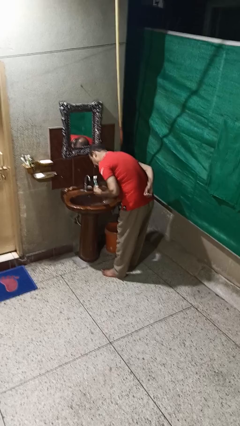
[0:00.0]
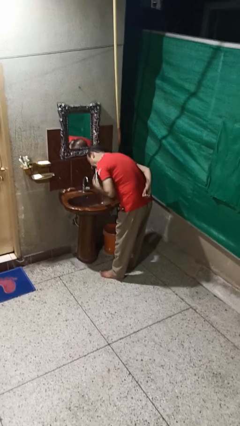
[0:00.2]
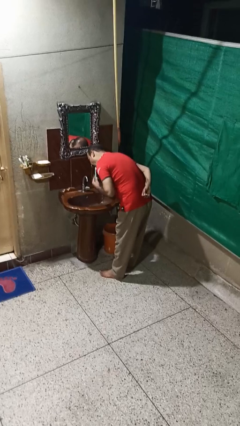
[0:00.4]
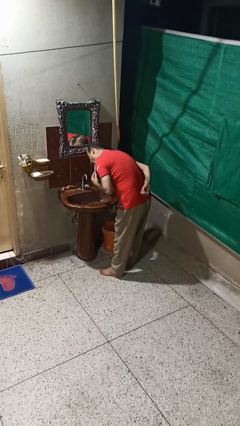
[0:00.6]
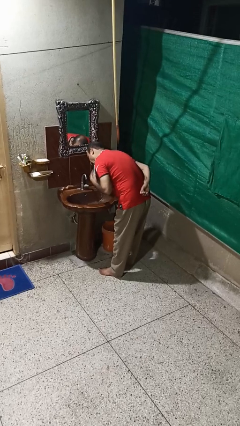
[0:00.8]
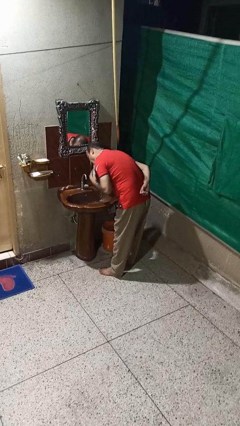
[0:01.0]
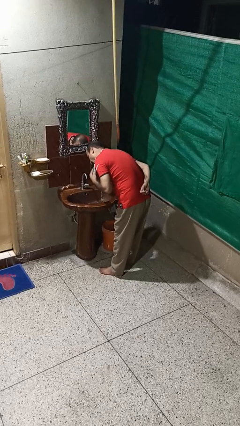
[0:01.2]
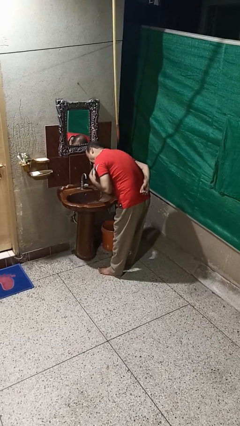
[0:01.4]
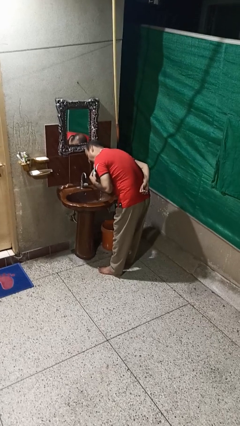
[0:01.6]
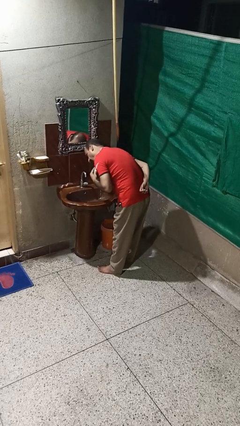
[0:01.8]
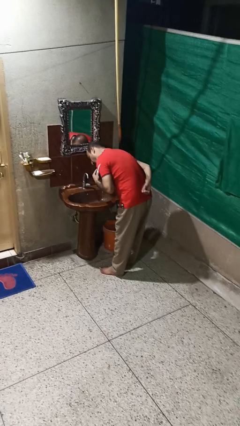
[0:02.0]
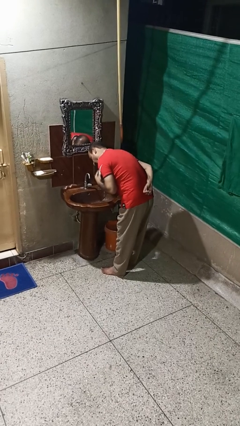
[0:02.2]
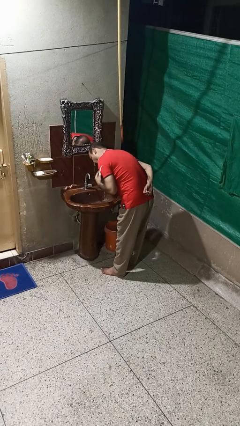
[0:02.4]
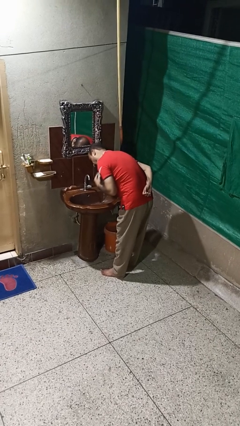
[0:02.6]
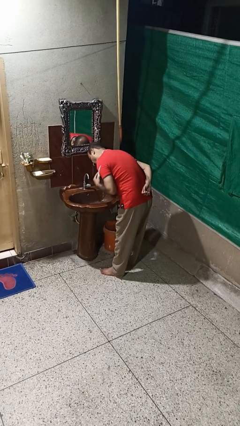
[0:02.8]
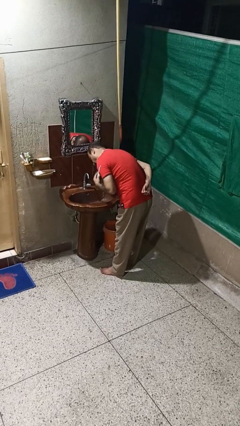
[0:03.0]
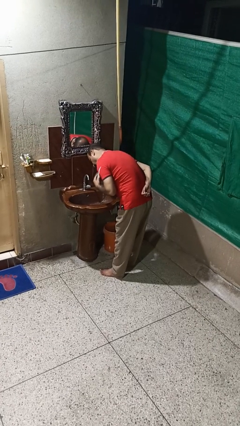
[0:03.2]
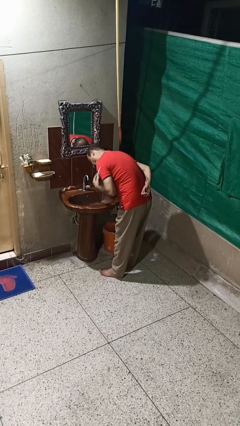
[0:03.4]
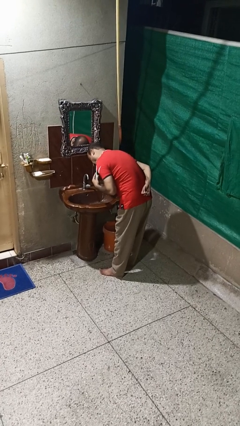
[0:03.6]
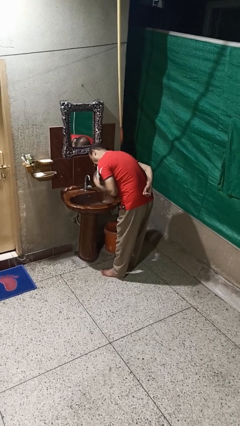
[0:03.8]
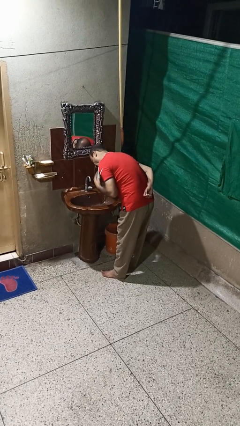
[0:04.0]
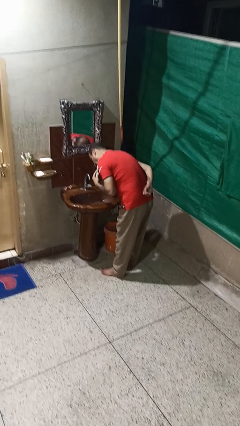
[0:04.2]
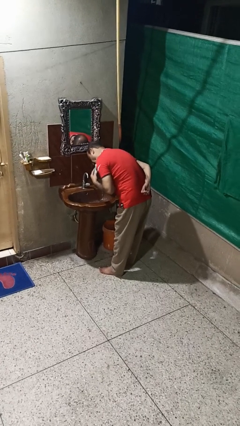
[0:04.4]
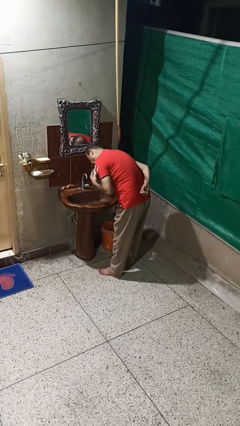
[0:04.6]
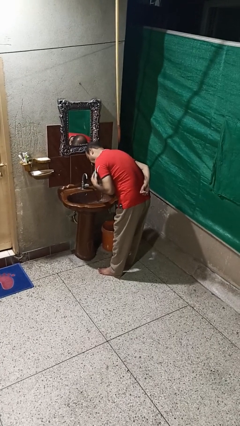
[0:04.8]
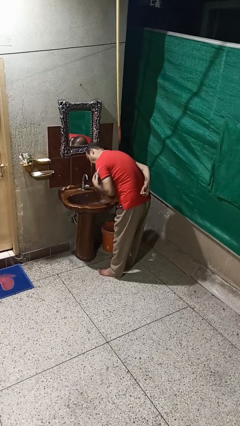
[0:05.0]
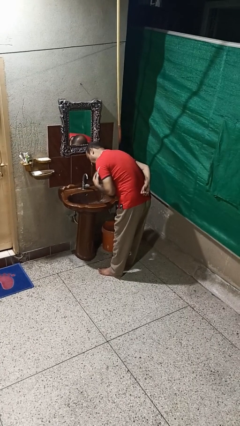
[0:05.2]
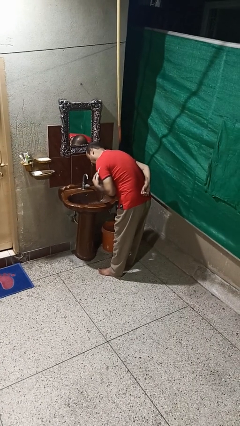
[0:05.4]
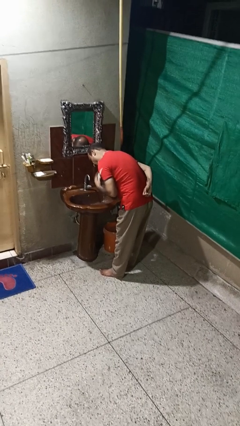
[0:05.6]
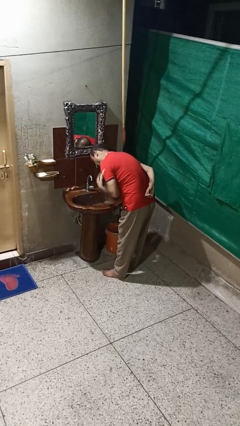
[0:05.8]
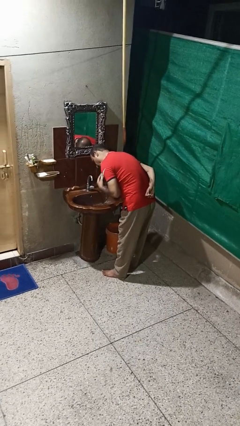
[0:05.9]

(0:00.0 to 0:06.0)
person brushes teeth

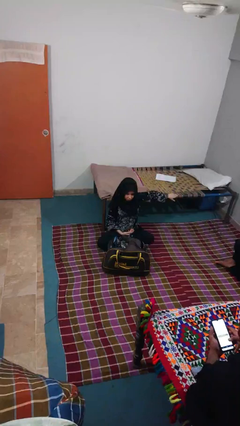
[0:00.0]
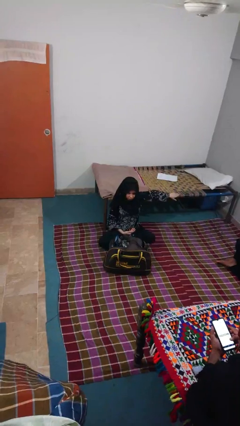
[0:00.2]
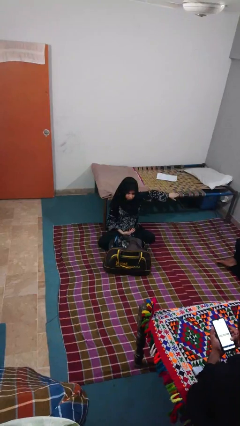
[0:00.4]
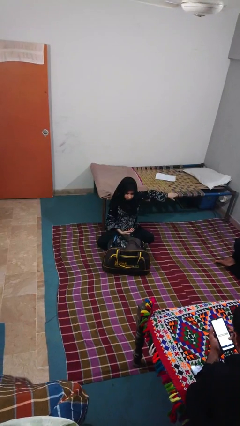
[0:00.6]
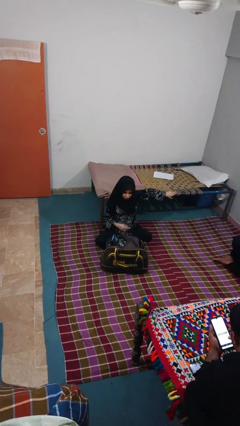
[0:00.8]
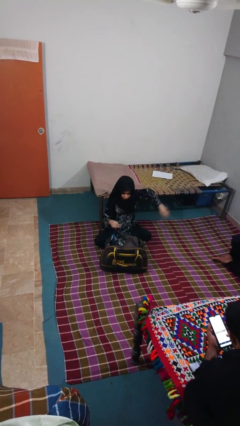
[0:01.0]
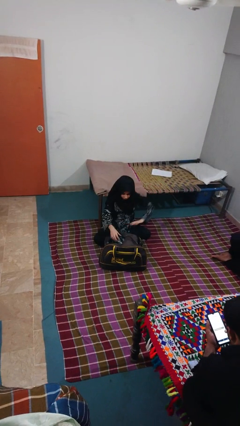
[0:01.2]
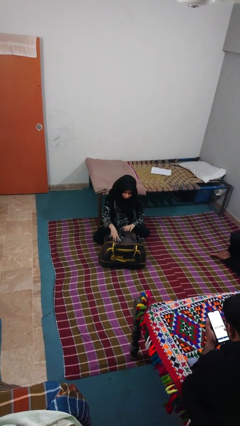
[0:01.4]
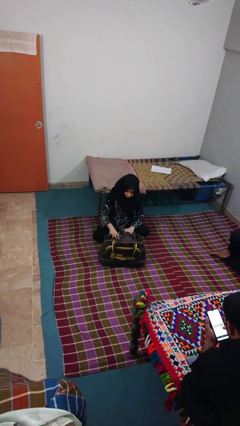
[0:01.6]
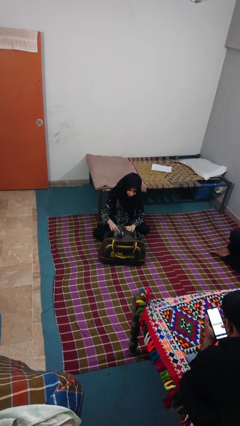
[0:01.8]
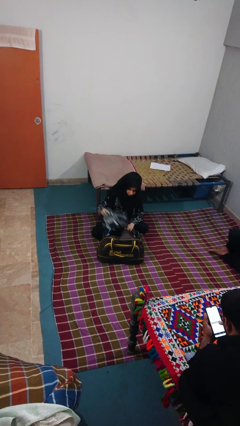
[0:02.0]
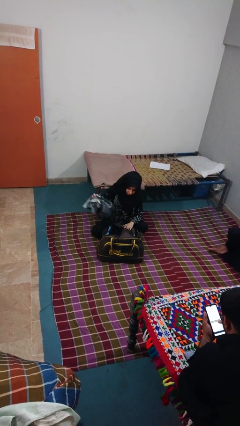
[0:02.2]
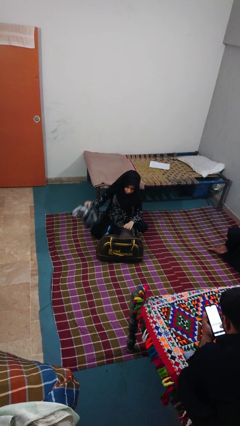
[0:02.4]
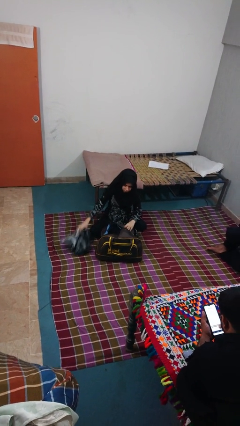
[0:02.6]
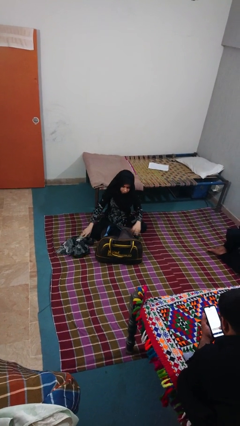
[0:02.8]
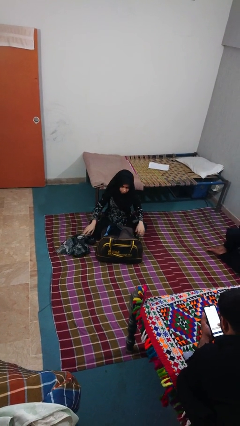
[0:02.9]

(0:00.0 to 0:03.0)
person unloads clothes from suitcase

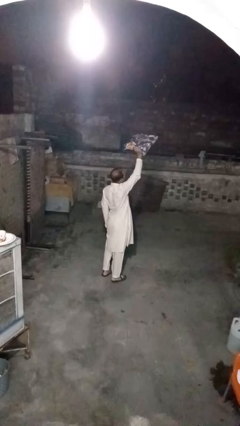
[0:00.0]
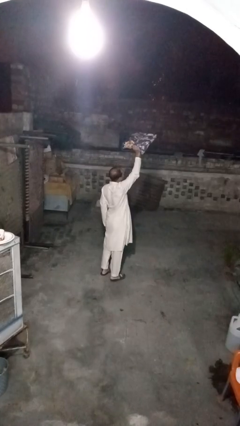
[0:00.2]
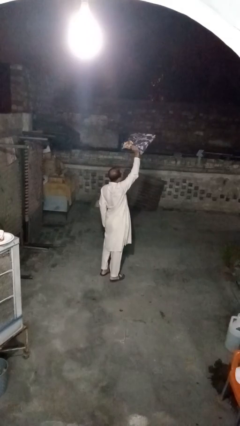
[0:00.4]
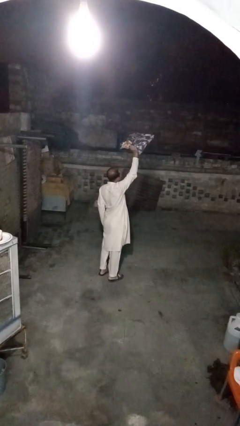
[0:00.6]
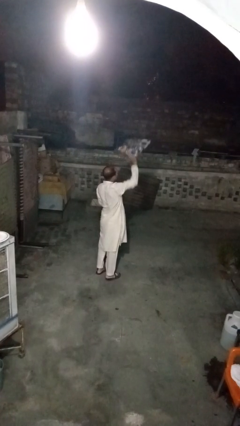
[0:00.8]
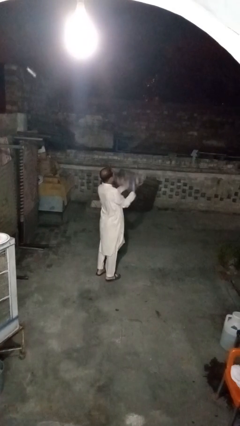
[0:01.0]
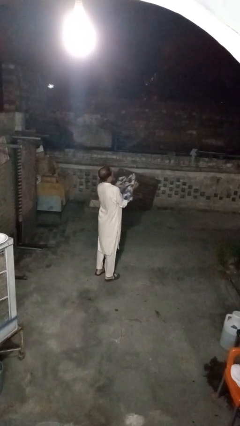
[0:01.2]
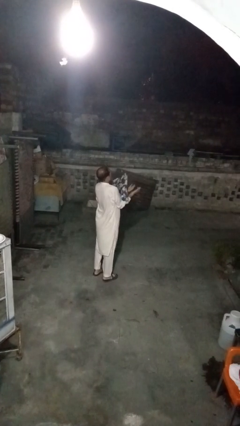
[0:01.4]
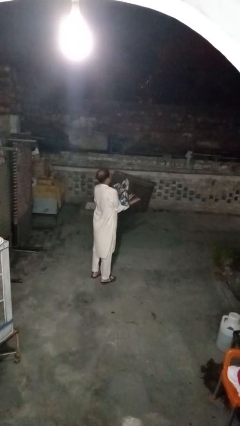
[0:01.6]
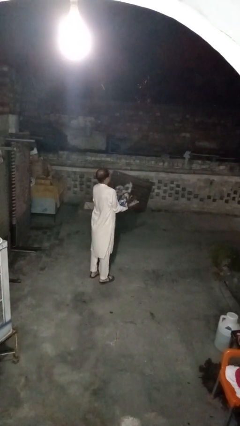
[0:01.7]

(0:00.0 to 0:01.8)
person drops object

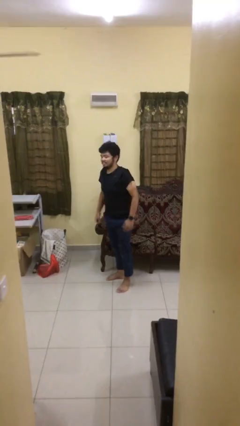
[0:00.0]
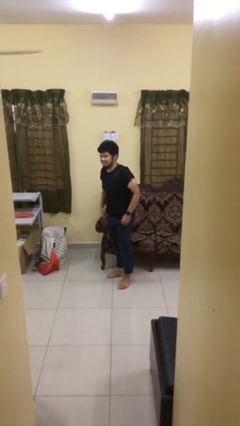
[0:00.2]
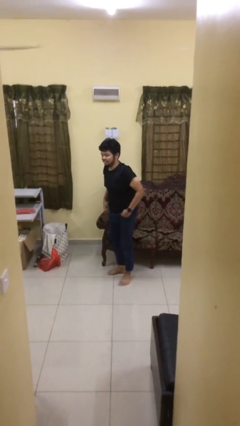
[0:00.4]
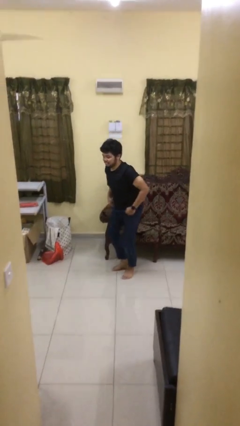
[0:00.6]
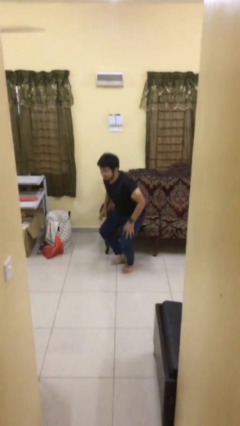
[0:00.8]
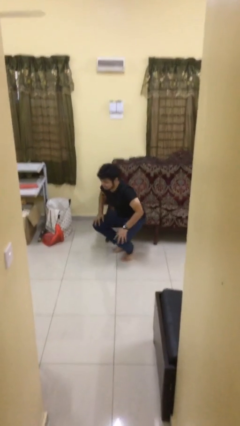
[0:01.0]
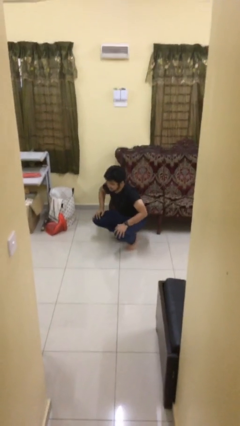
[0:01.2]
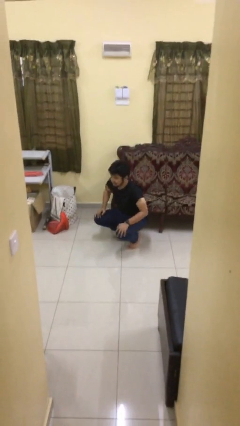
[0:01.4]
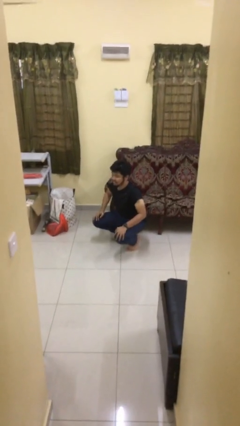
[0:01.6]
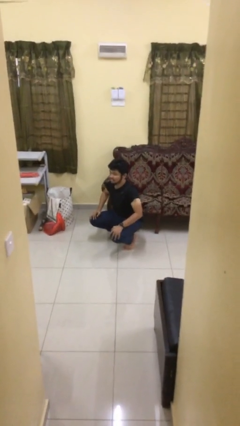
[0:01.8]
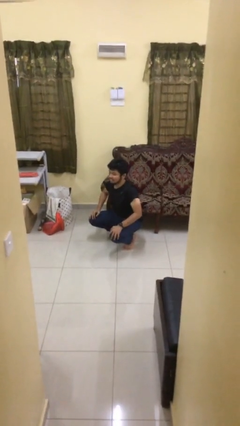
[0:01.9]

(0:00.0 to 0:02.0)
person squats

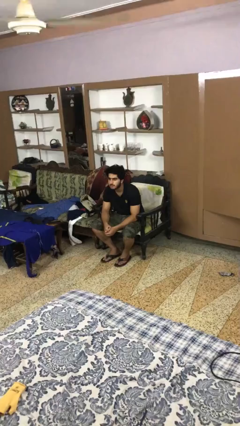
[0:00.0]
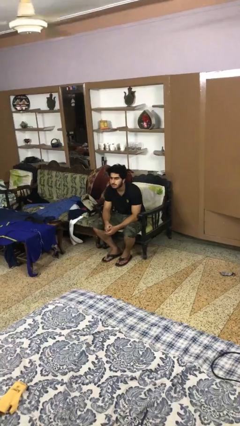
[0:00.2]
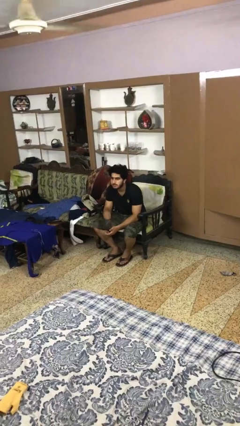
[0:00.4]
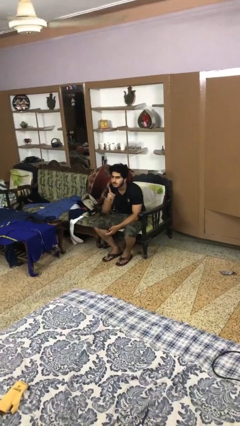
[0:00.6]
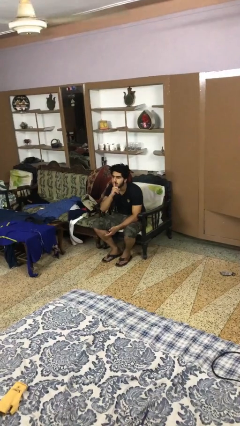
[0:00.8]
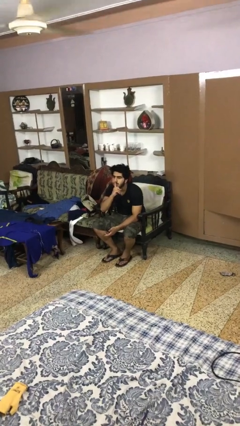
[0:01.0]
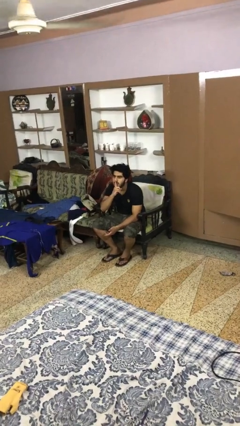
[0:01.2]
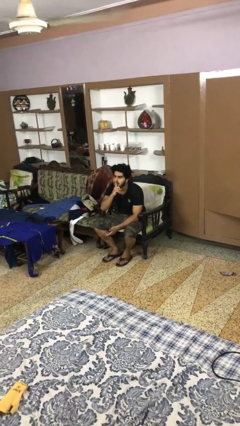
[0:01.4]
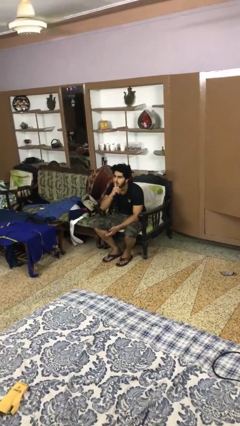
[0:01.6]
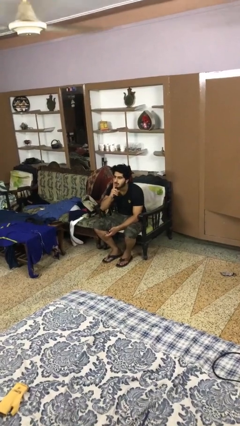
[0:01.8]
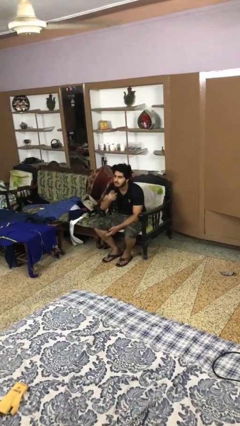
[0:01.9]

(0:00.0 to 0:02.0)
person gestures be quiet

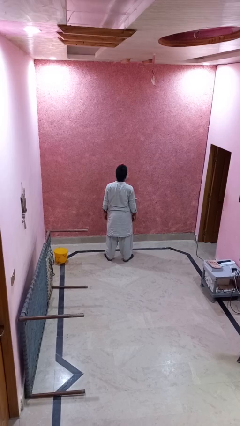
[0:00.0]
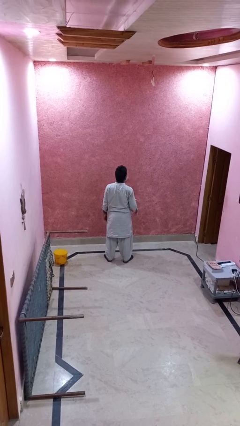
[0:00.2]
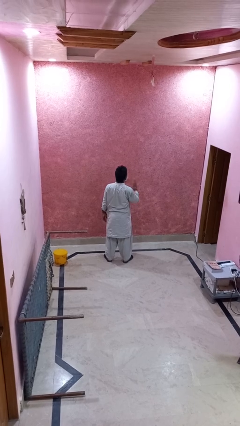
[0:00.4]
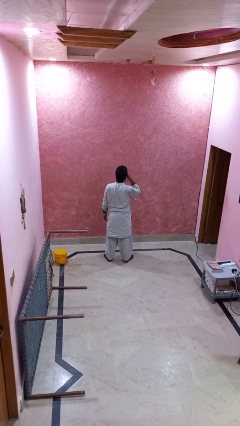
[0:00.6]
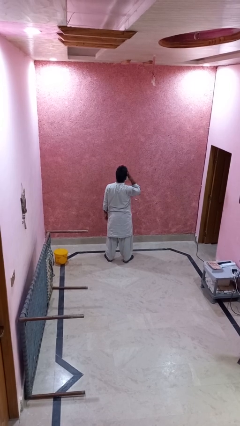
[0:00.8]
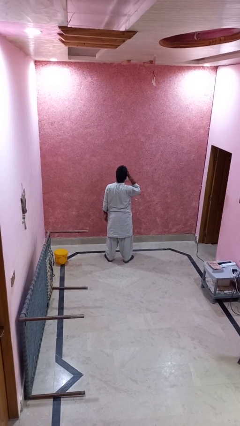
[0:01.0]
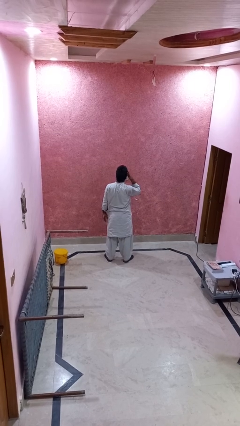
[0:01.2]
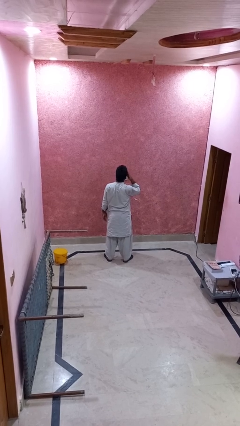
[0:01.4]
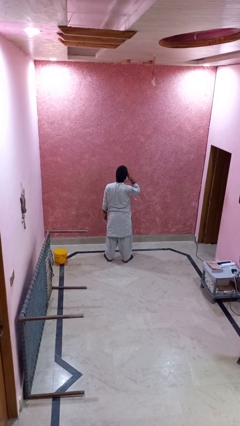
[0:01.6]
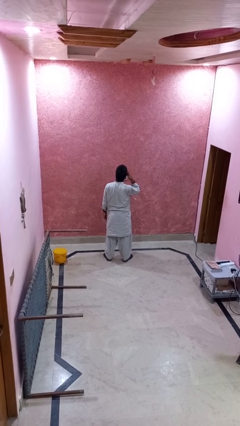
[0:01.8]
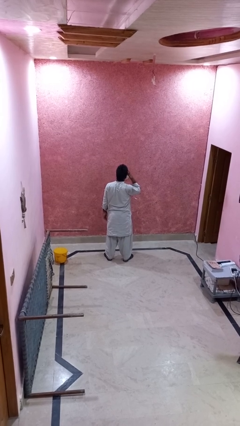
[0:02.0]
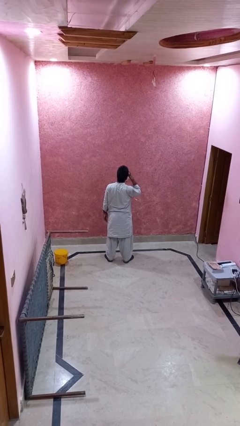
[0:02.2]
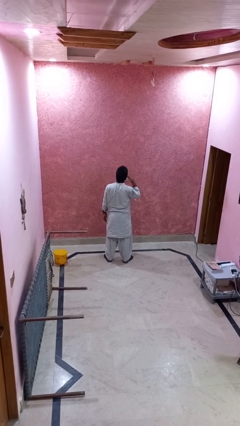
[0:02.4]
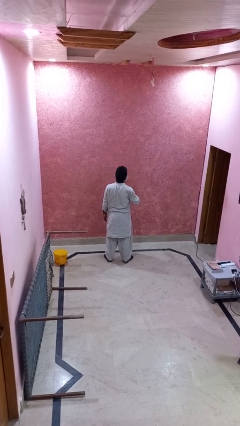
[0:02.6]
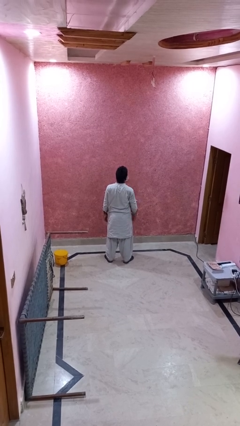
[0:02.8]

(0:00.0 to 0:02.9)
person rubs eyes
